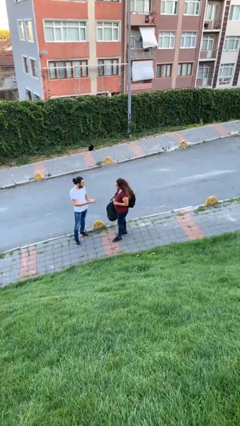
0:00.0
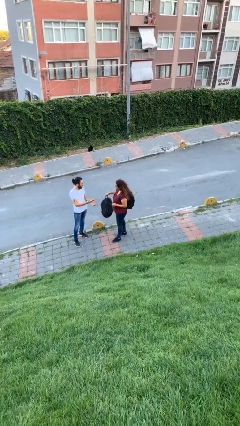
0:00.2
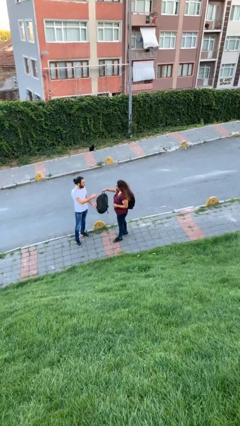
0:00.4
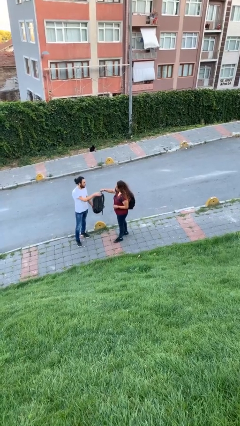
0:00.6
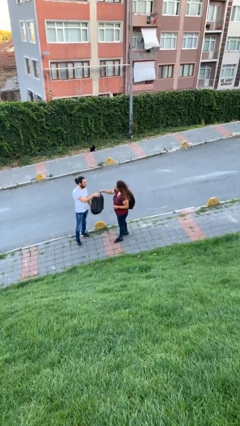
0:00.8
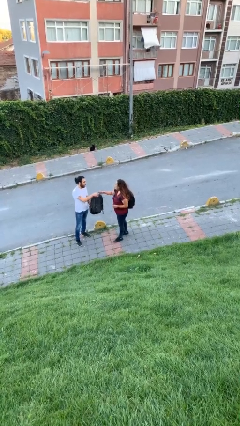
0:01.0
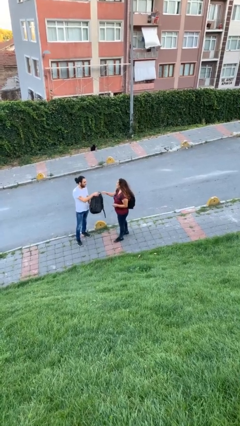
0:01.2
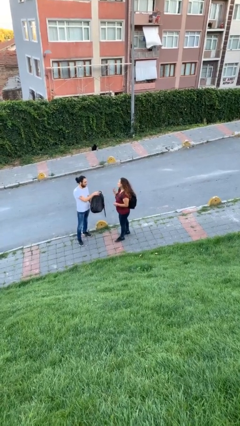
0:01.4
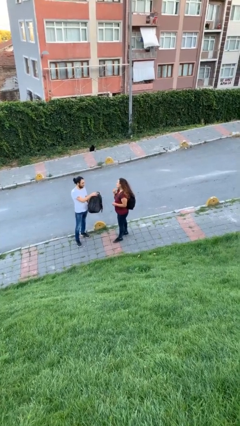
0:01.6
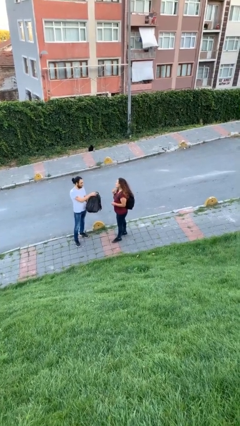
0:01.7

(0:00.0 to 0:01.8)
person transfers object to person

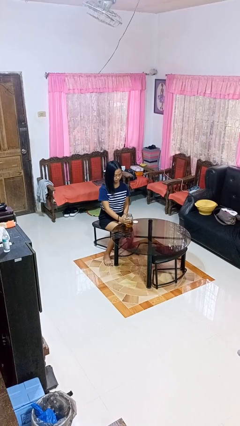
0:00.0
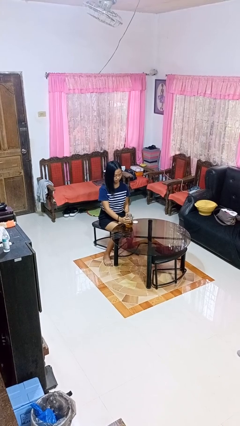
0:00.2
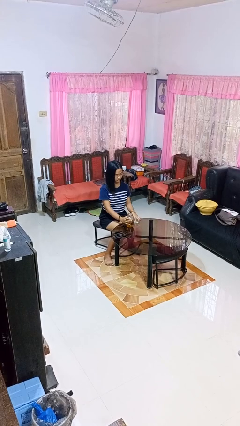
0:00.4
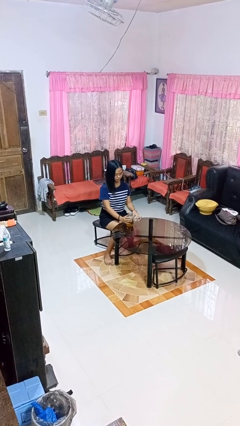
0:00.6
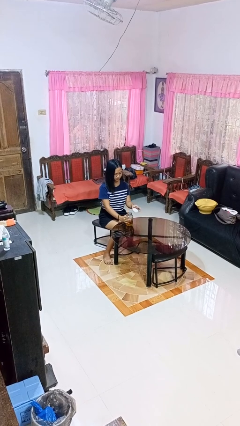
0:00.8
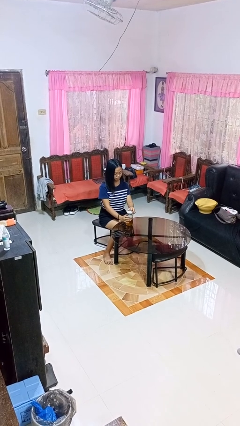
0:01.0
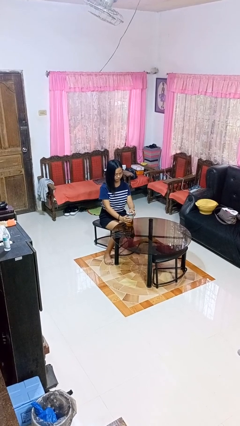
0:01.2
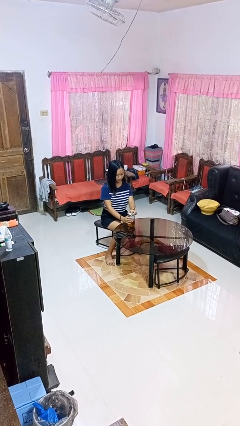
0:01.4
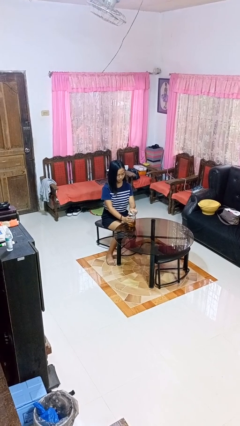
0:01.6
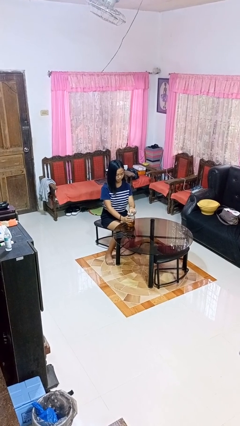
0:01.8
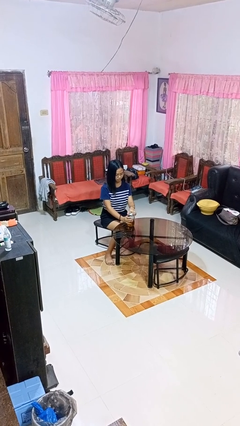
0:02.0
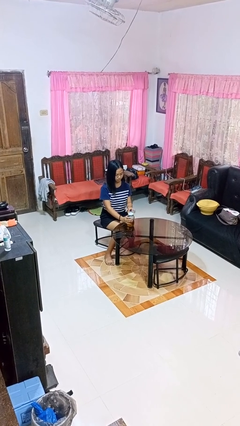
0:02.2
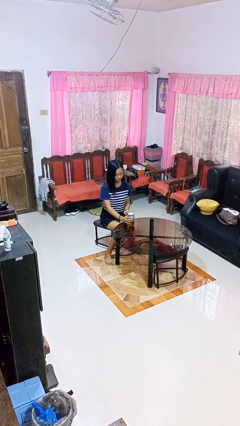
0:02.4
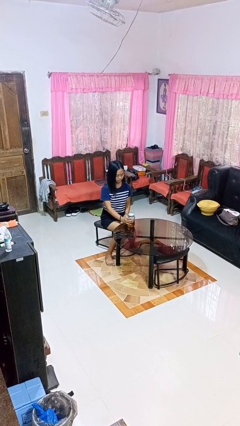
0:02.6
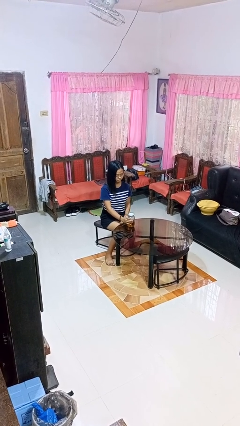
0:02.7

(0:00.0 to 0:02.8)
person closes jar

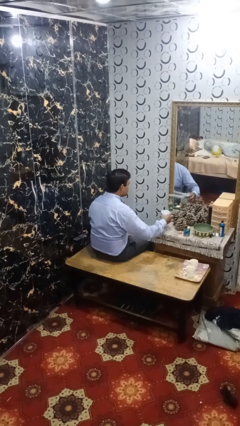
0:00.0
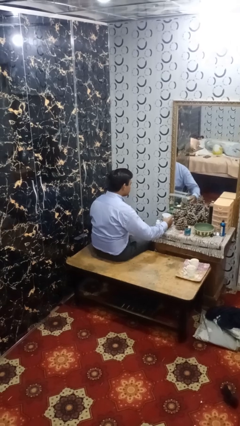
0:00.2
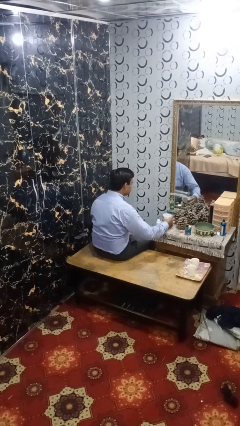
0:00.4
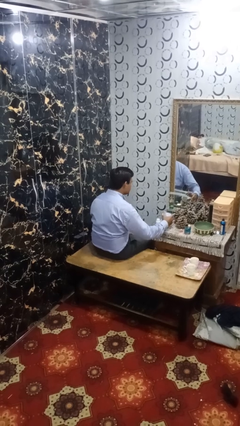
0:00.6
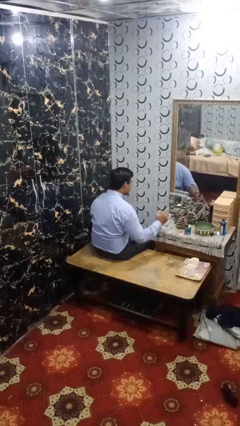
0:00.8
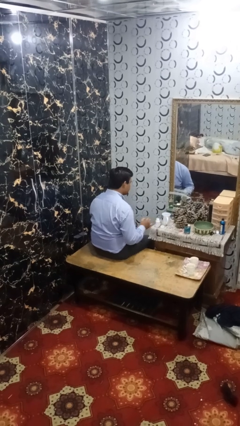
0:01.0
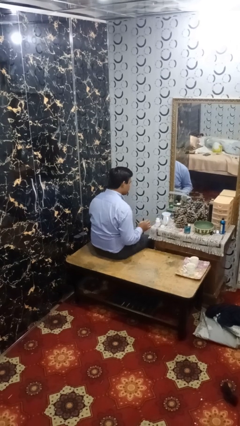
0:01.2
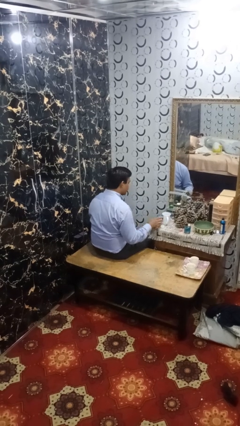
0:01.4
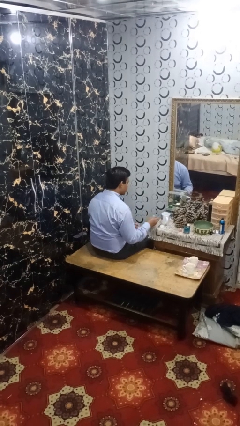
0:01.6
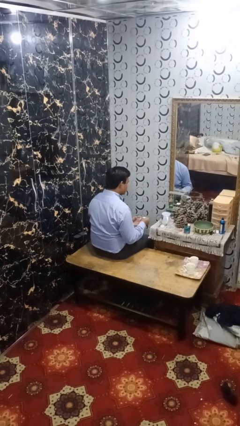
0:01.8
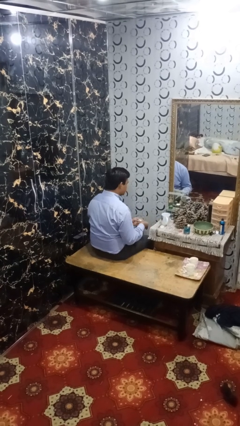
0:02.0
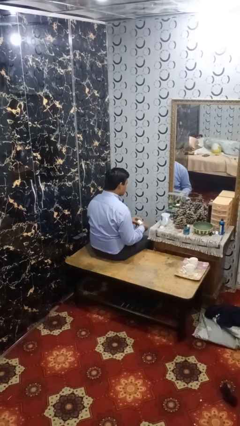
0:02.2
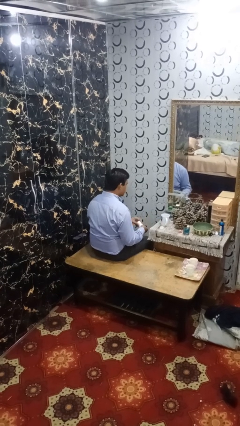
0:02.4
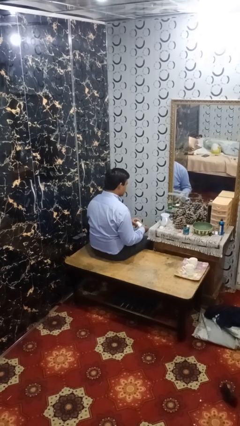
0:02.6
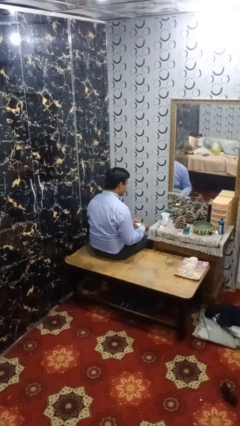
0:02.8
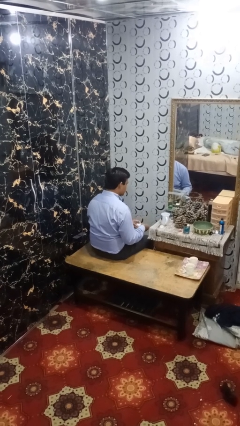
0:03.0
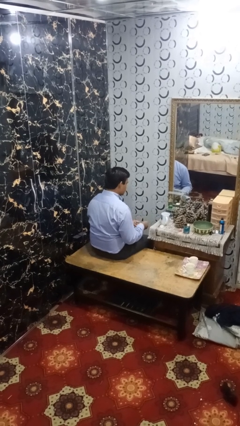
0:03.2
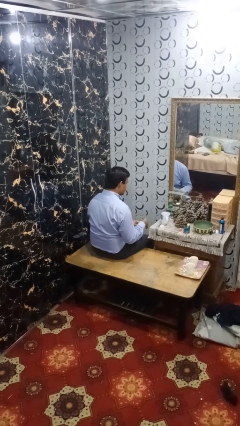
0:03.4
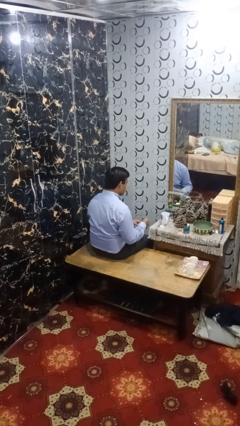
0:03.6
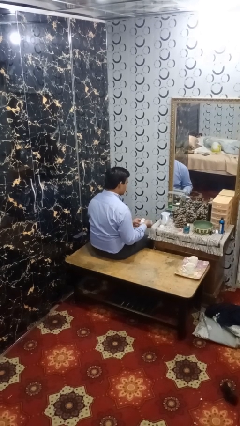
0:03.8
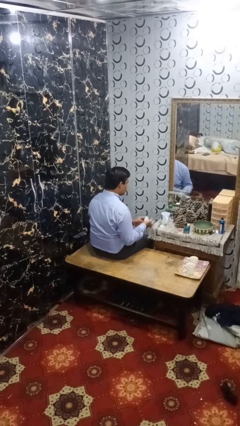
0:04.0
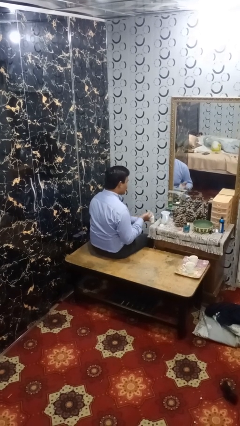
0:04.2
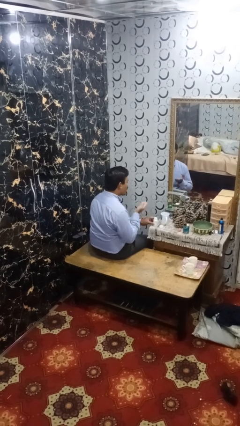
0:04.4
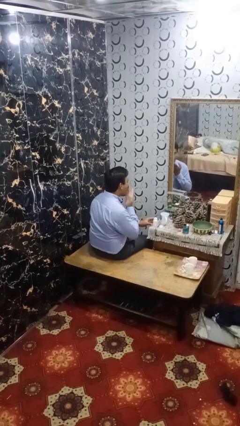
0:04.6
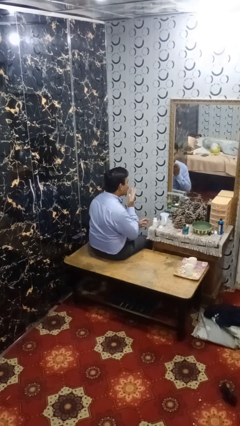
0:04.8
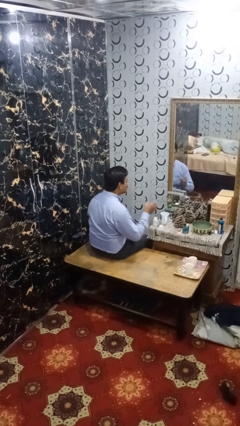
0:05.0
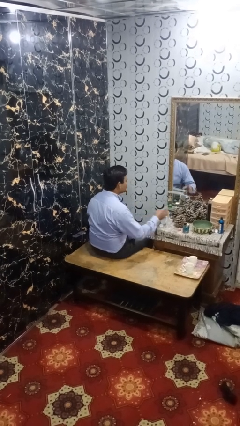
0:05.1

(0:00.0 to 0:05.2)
person takes medicine pills

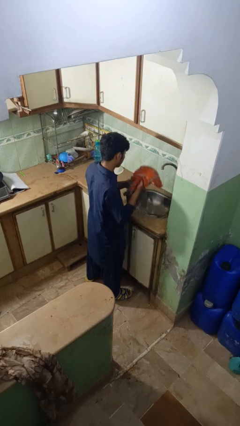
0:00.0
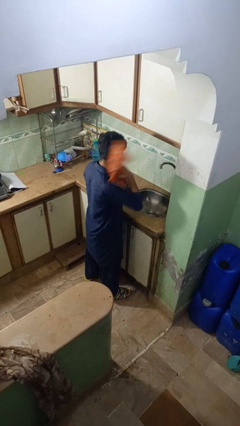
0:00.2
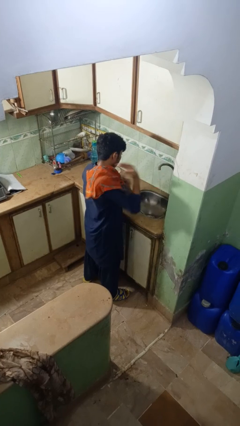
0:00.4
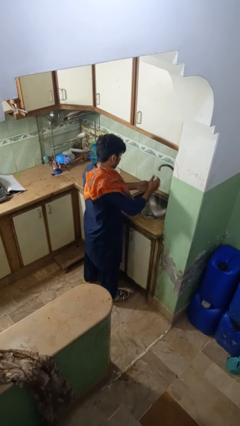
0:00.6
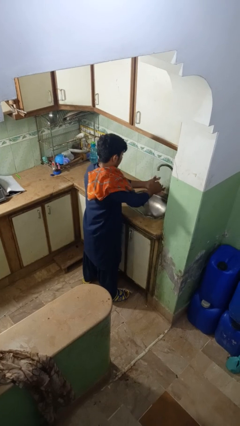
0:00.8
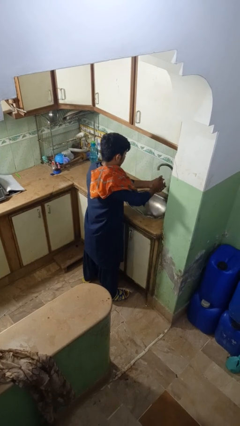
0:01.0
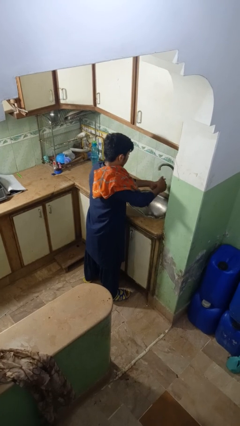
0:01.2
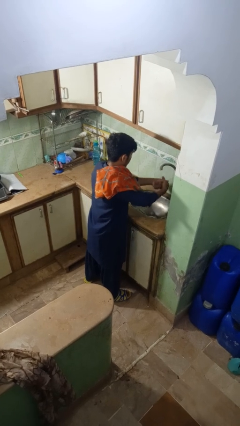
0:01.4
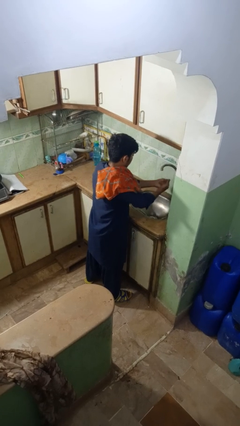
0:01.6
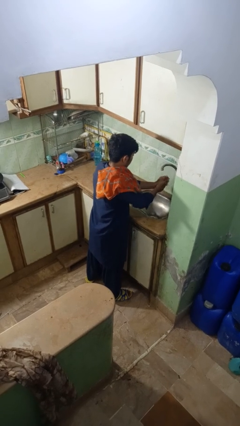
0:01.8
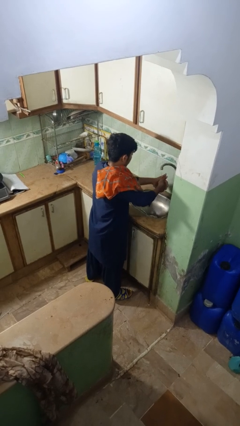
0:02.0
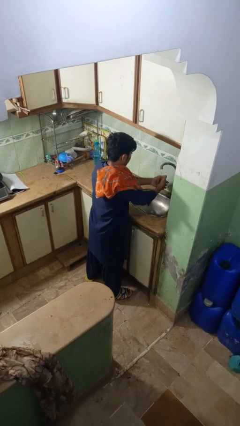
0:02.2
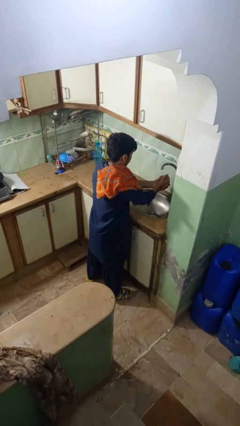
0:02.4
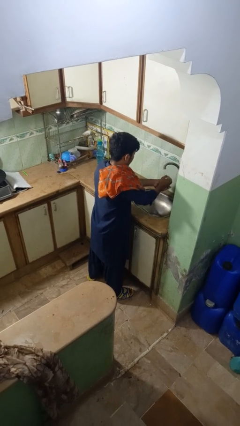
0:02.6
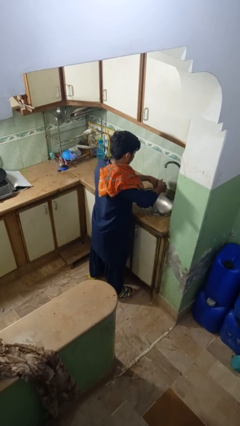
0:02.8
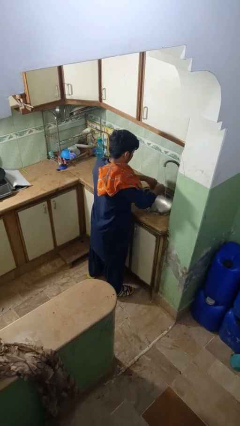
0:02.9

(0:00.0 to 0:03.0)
person washes hands

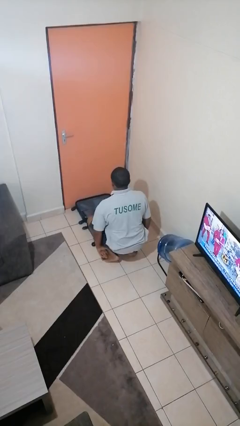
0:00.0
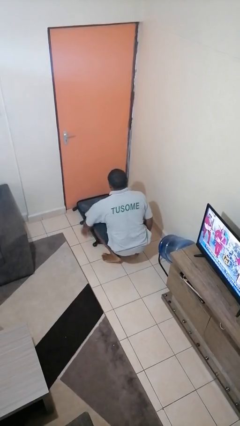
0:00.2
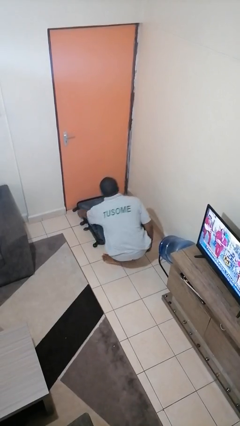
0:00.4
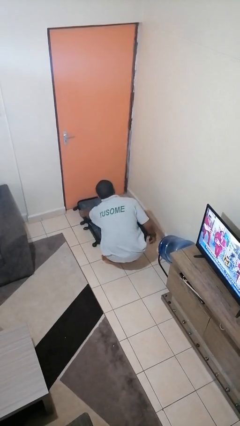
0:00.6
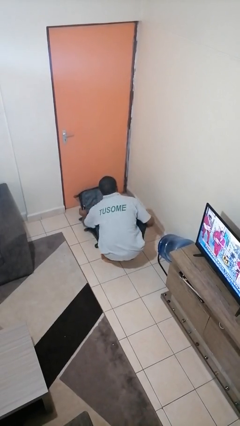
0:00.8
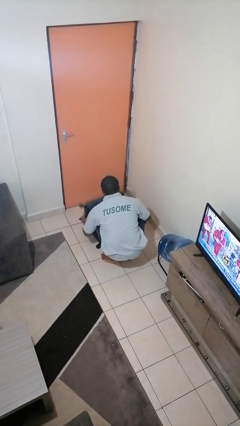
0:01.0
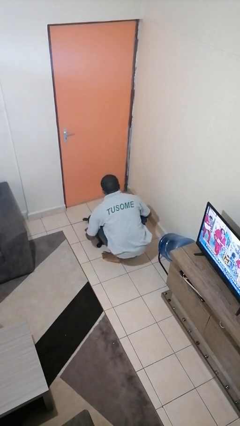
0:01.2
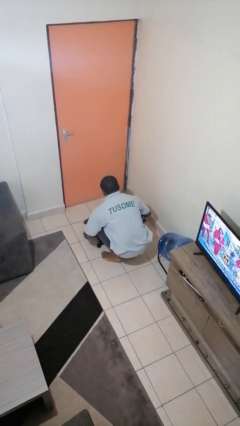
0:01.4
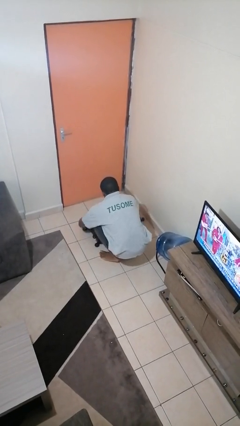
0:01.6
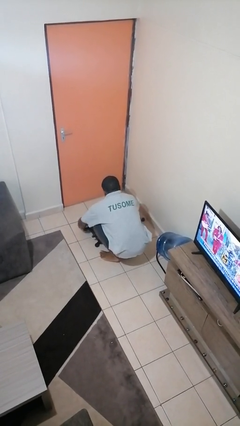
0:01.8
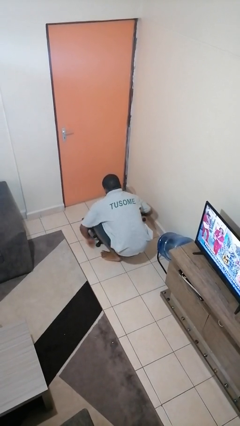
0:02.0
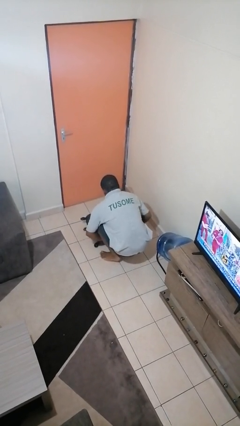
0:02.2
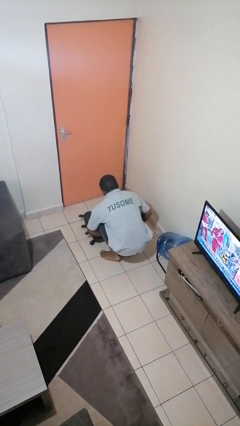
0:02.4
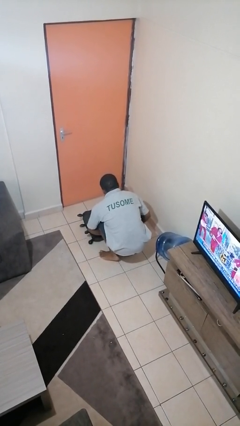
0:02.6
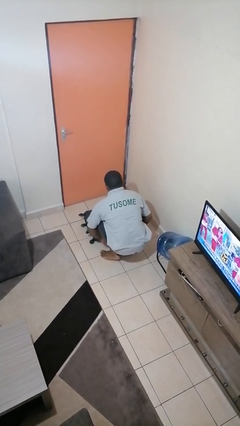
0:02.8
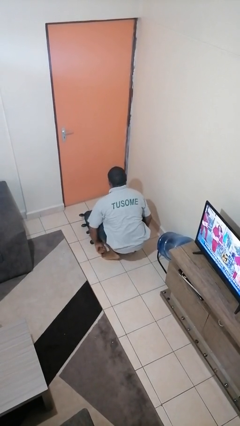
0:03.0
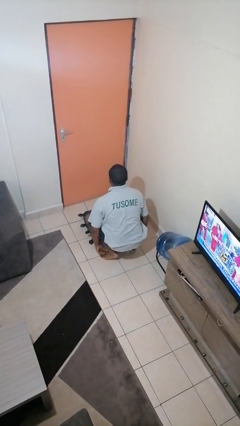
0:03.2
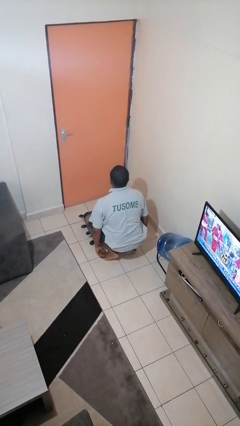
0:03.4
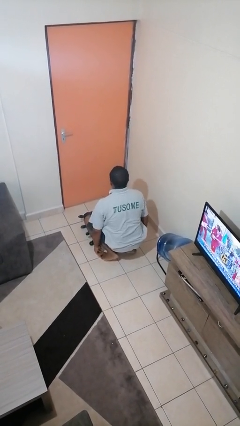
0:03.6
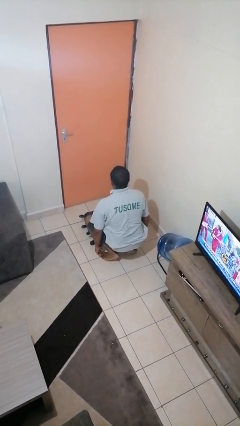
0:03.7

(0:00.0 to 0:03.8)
person closes suitcase

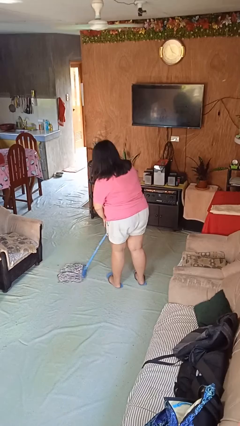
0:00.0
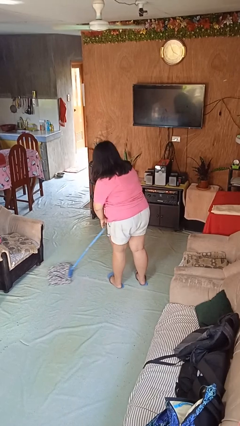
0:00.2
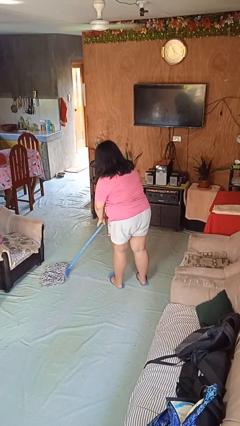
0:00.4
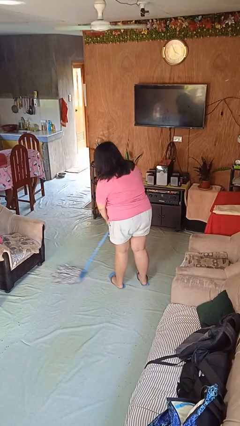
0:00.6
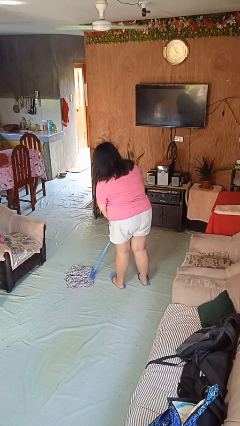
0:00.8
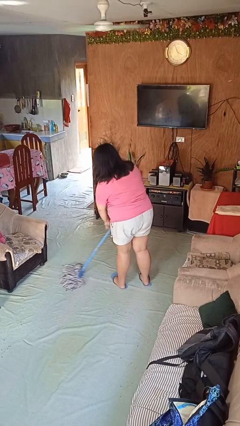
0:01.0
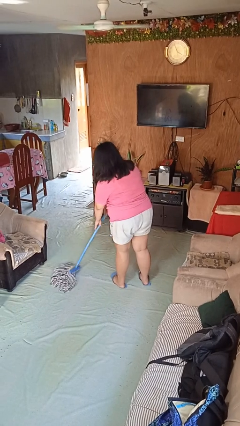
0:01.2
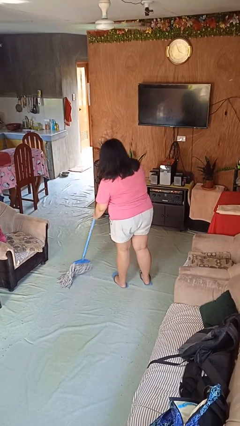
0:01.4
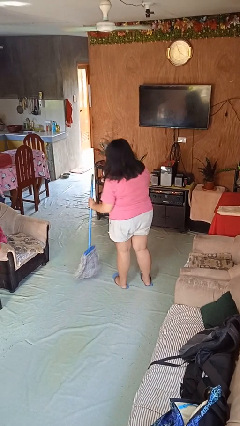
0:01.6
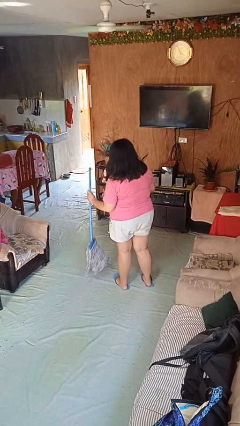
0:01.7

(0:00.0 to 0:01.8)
person mops
